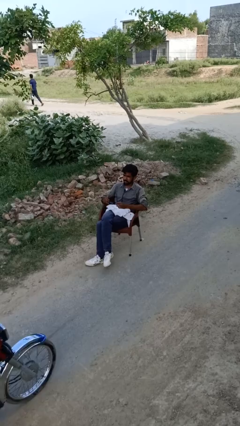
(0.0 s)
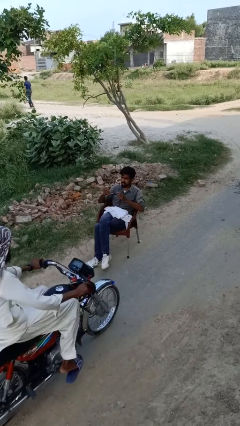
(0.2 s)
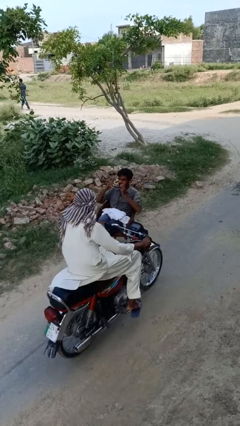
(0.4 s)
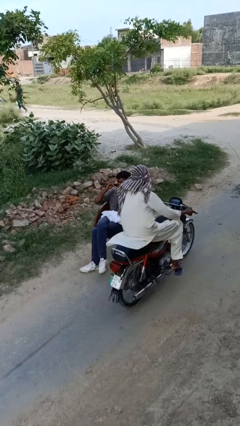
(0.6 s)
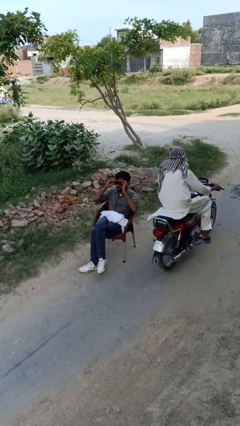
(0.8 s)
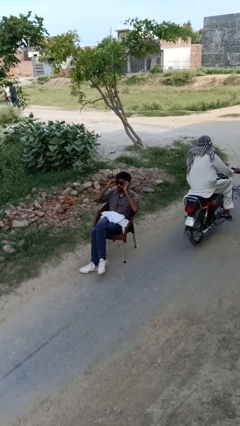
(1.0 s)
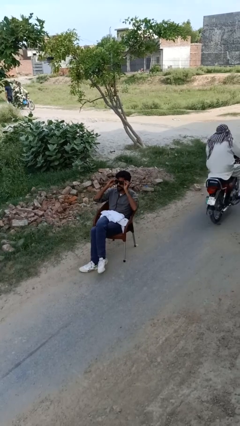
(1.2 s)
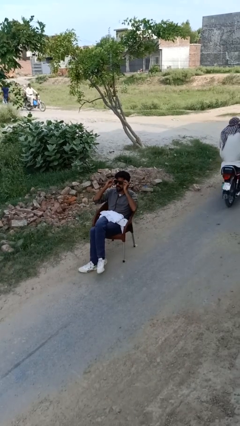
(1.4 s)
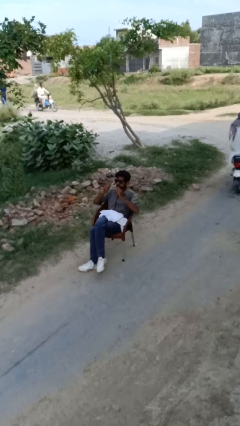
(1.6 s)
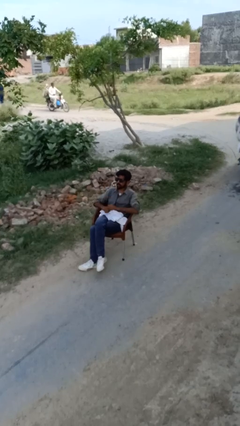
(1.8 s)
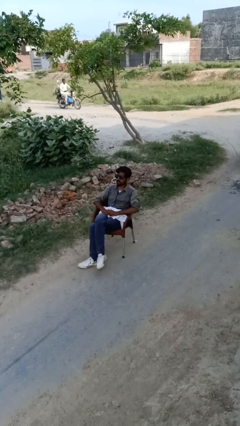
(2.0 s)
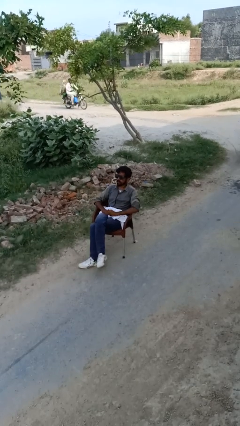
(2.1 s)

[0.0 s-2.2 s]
person puts on glasses

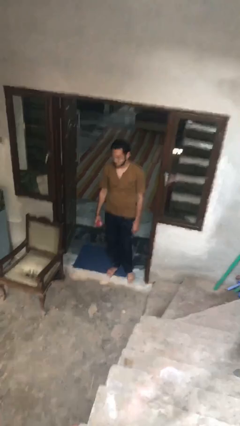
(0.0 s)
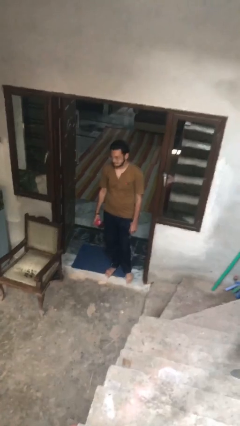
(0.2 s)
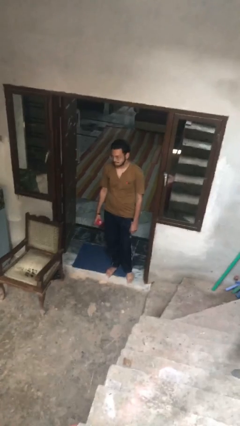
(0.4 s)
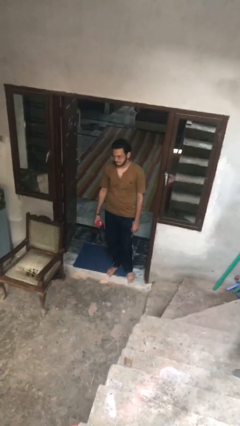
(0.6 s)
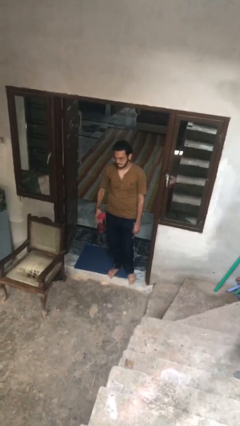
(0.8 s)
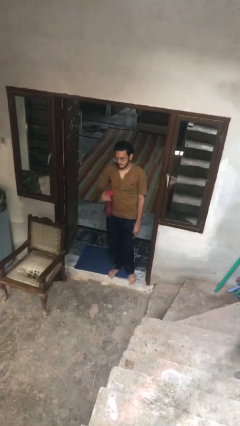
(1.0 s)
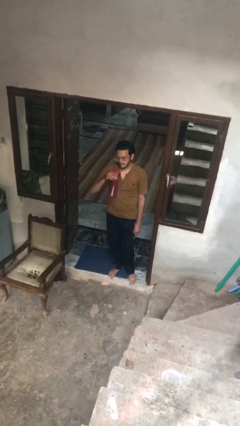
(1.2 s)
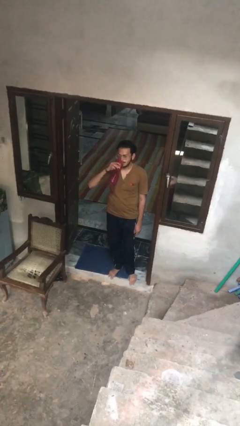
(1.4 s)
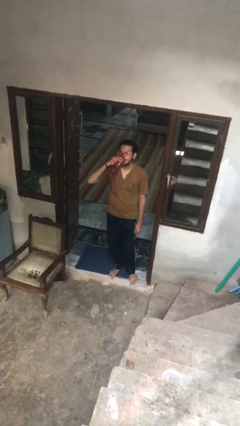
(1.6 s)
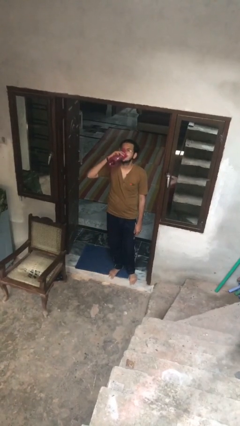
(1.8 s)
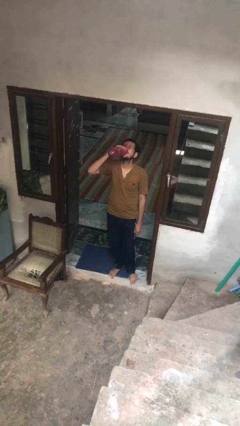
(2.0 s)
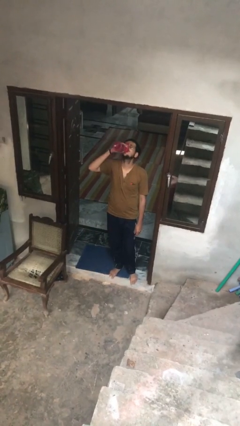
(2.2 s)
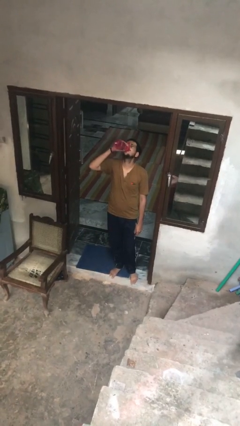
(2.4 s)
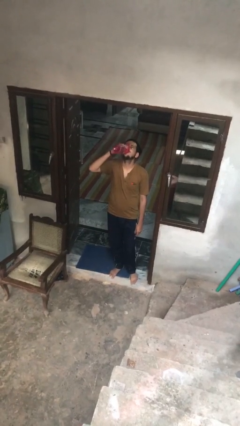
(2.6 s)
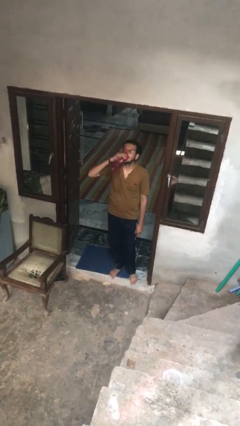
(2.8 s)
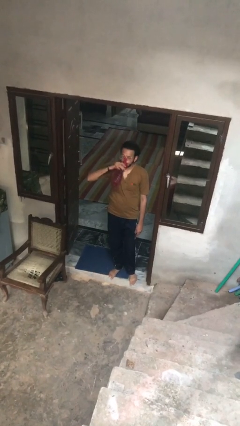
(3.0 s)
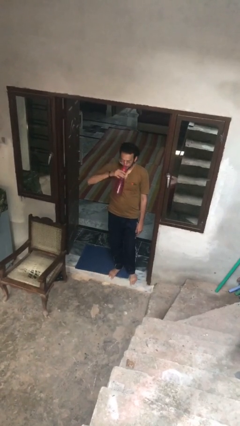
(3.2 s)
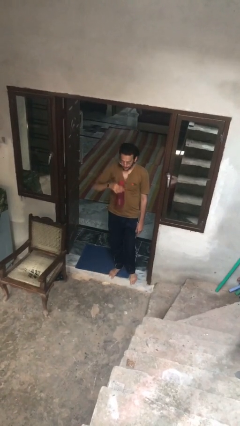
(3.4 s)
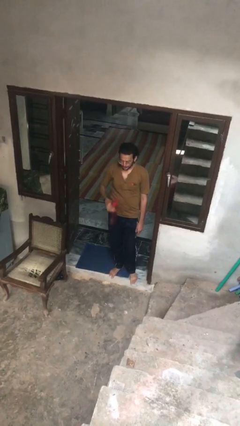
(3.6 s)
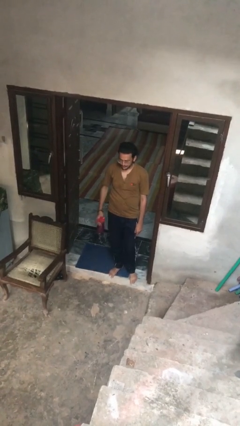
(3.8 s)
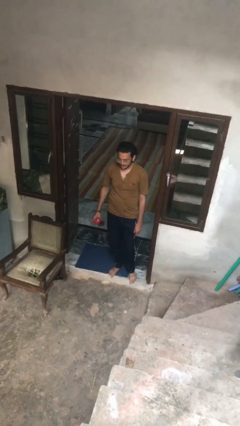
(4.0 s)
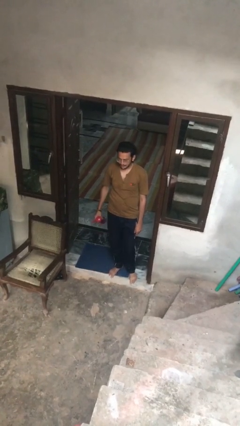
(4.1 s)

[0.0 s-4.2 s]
person drinks from bottle

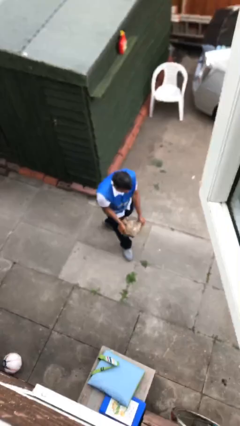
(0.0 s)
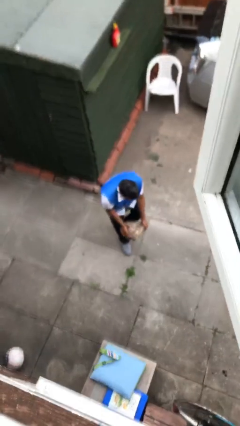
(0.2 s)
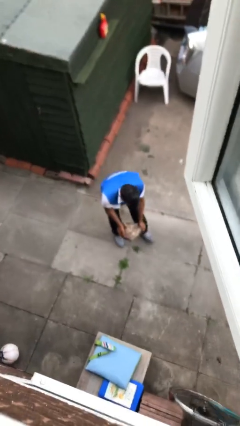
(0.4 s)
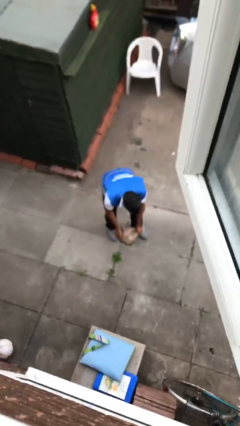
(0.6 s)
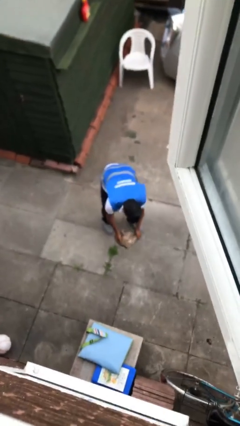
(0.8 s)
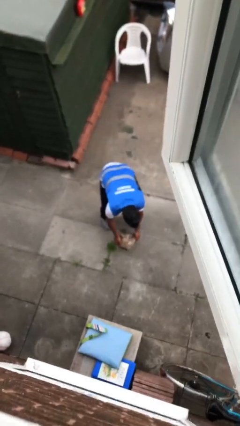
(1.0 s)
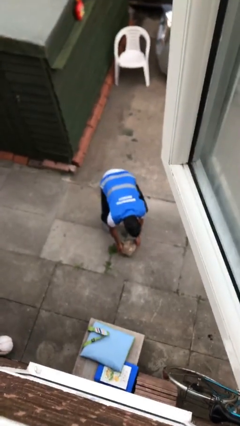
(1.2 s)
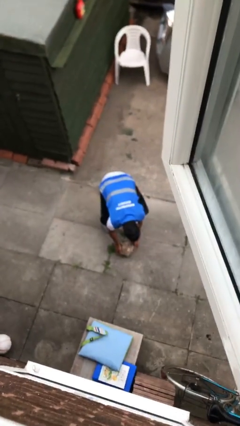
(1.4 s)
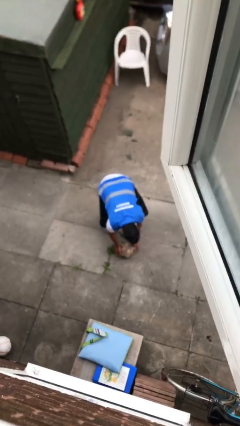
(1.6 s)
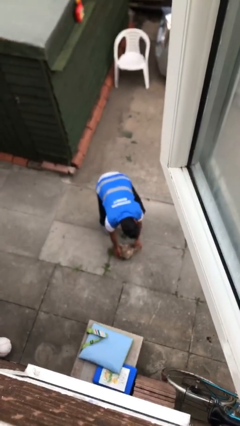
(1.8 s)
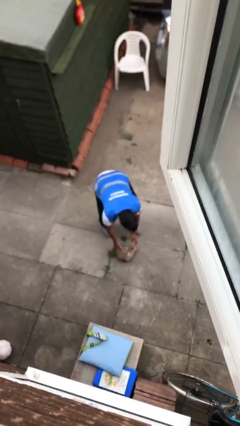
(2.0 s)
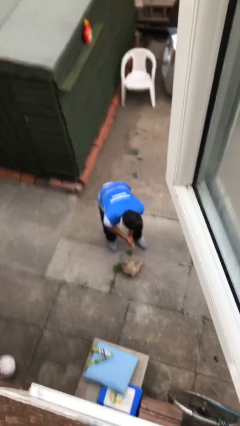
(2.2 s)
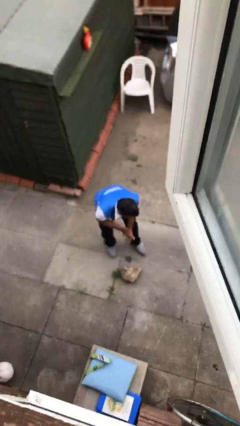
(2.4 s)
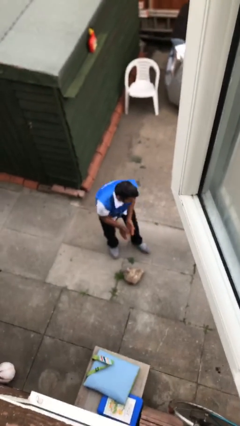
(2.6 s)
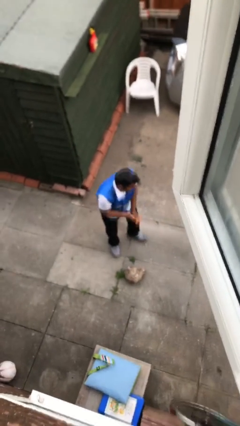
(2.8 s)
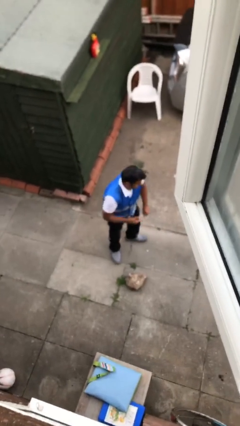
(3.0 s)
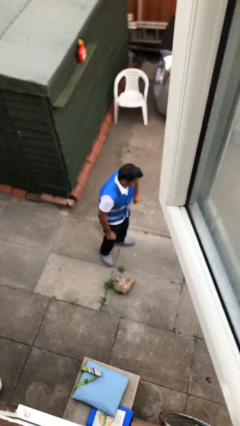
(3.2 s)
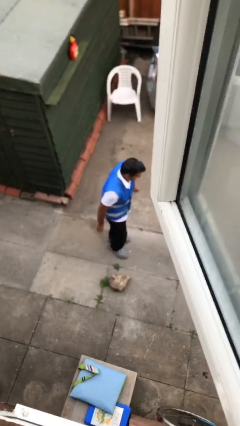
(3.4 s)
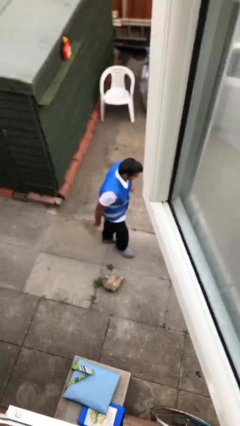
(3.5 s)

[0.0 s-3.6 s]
person puts down object on floor

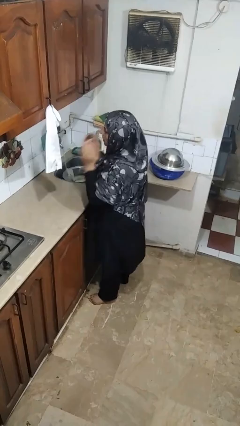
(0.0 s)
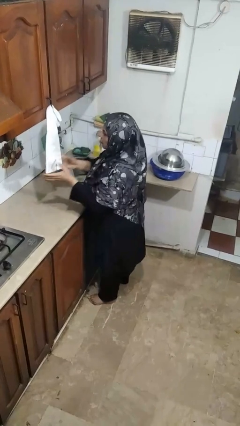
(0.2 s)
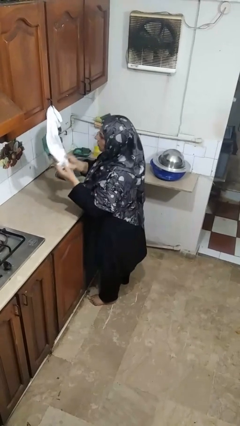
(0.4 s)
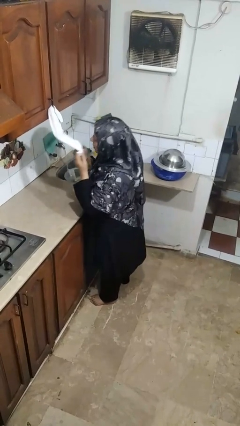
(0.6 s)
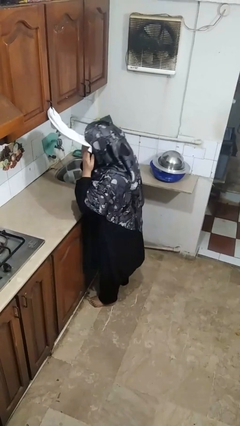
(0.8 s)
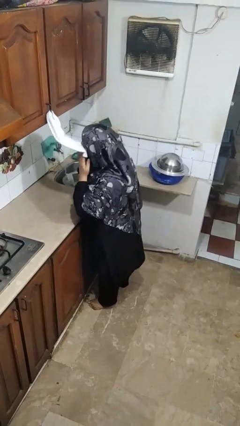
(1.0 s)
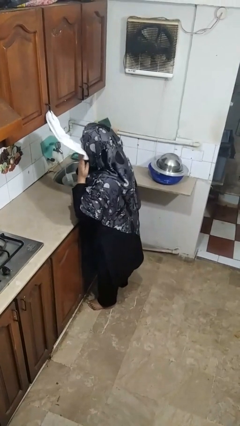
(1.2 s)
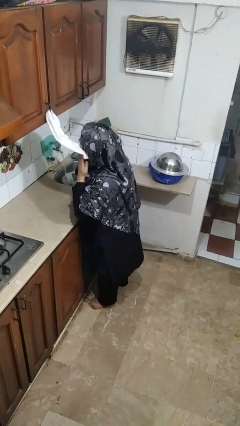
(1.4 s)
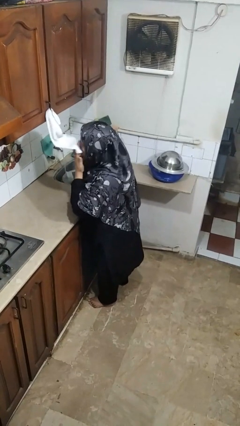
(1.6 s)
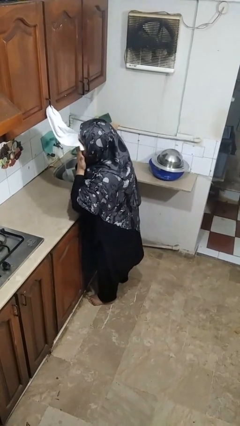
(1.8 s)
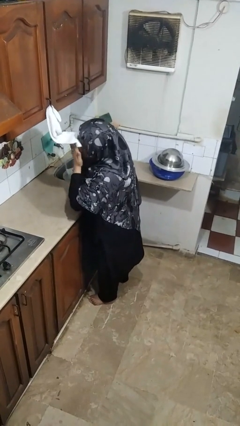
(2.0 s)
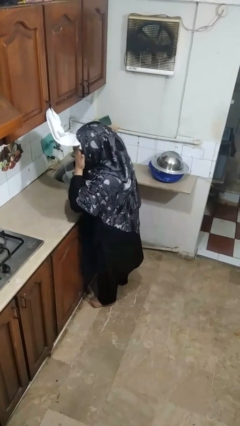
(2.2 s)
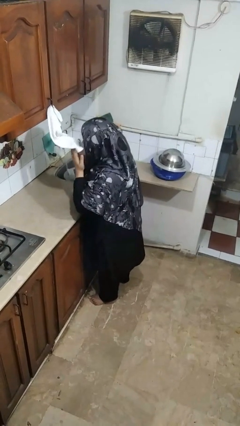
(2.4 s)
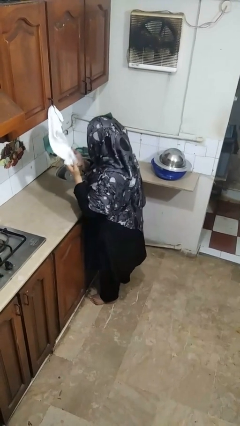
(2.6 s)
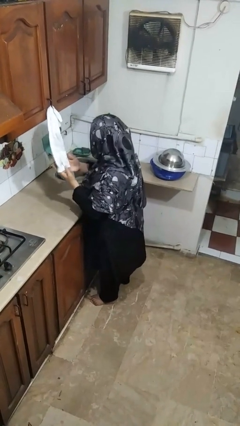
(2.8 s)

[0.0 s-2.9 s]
person dries face with towel

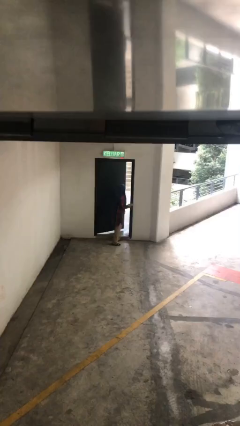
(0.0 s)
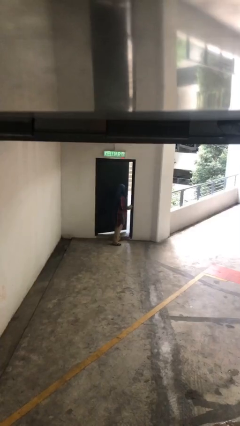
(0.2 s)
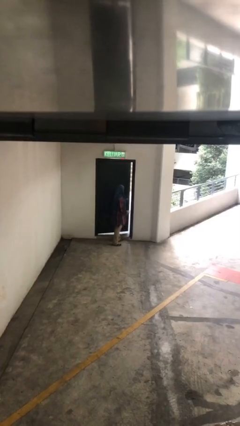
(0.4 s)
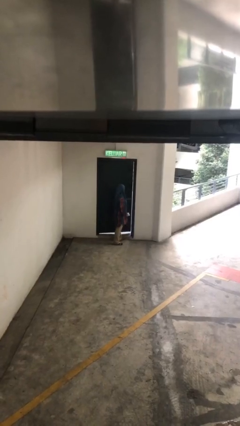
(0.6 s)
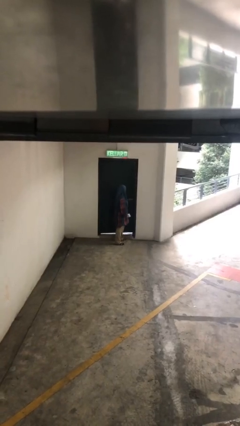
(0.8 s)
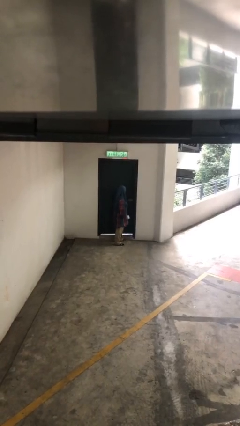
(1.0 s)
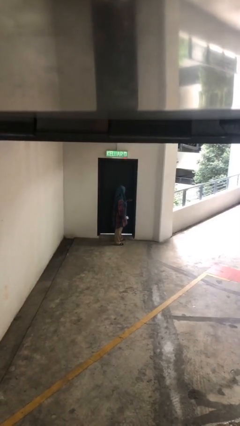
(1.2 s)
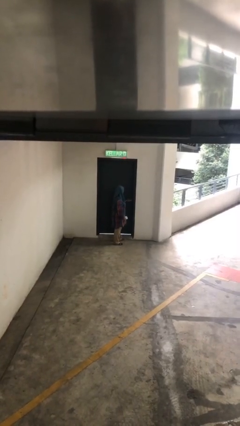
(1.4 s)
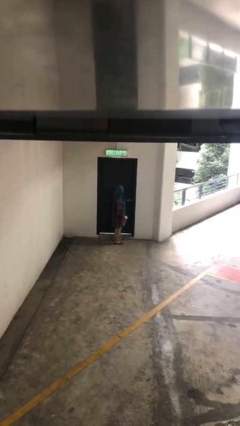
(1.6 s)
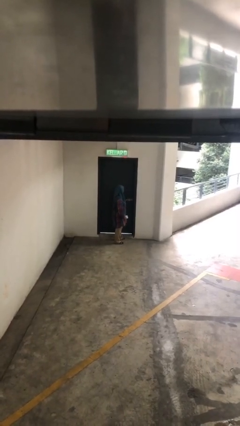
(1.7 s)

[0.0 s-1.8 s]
person closes facility door

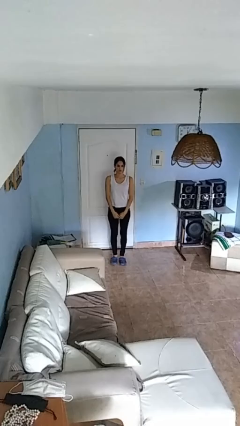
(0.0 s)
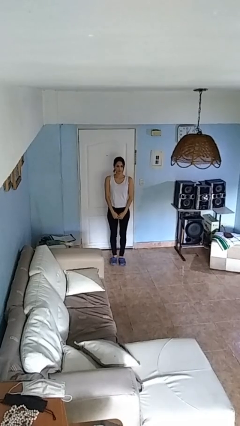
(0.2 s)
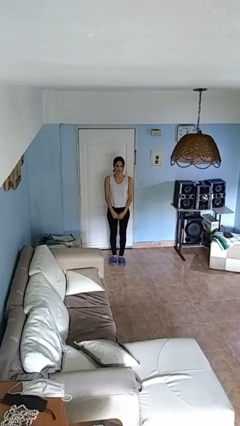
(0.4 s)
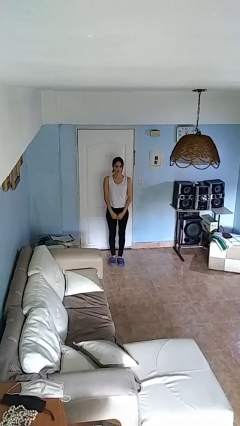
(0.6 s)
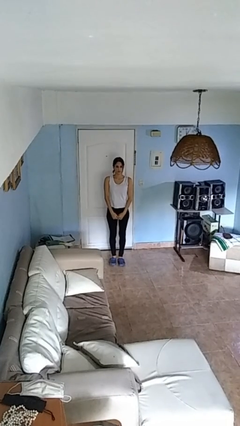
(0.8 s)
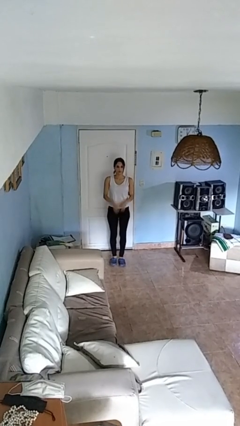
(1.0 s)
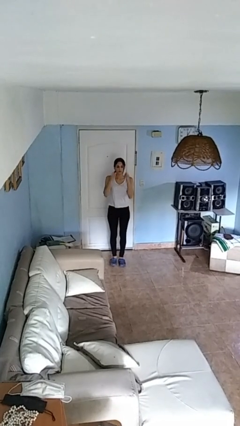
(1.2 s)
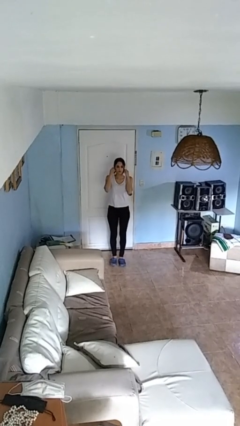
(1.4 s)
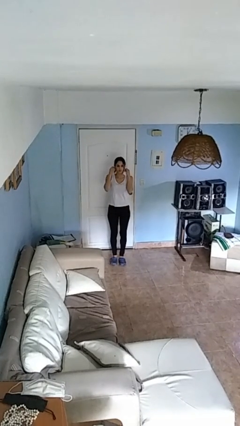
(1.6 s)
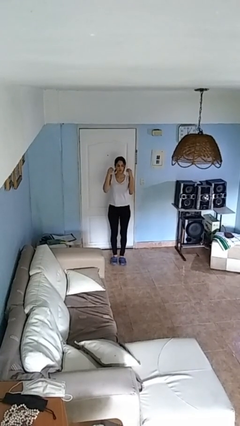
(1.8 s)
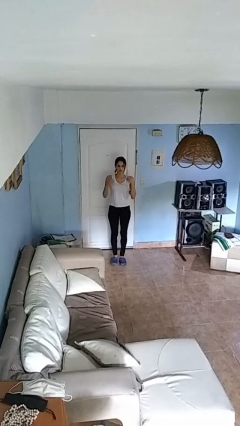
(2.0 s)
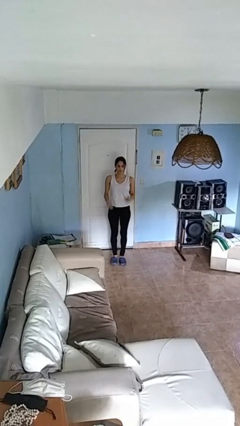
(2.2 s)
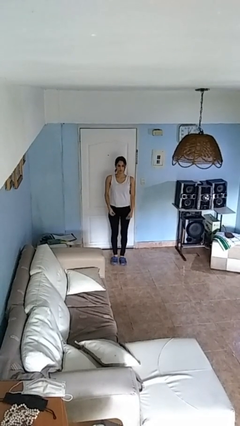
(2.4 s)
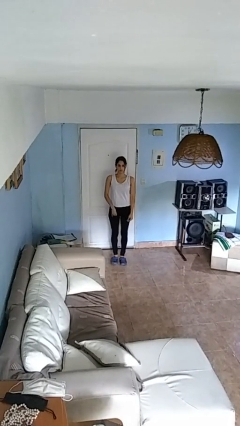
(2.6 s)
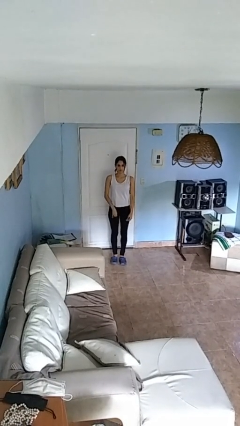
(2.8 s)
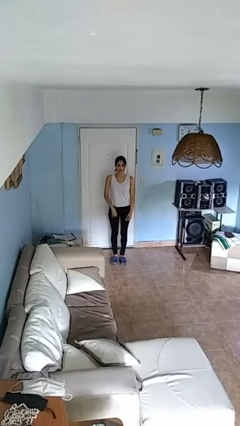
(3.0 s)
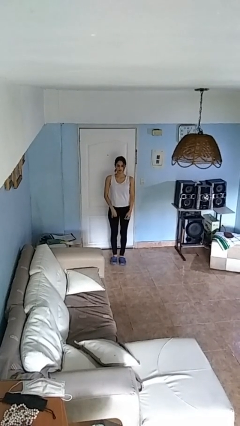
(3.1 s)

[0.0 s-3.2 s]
person takes off earrings
